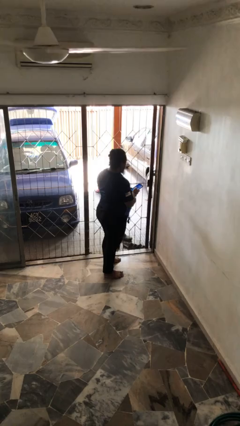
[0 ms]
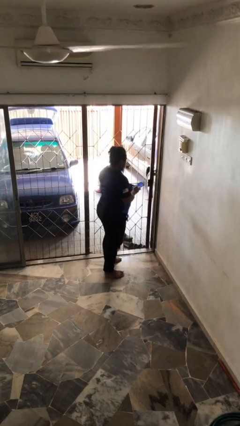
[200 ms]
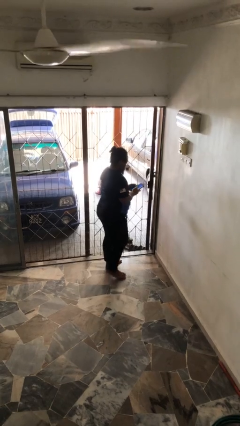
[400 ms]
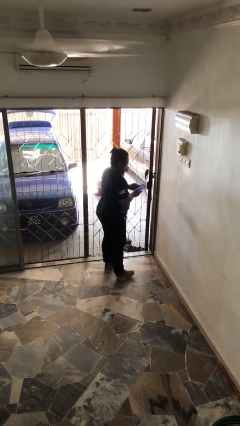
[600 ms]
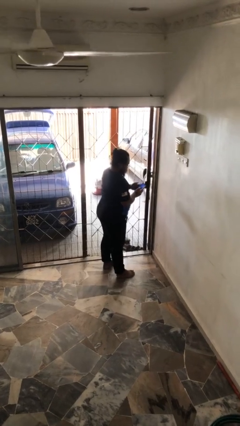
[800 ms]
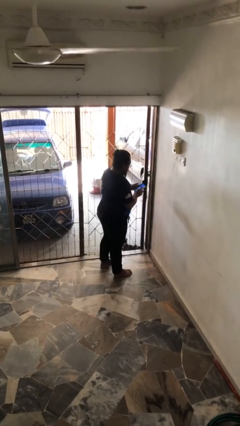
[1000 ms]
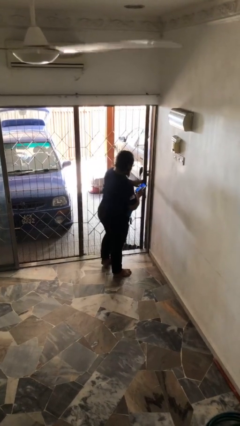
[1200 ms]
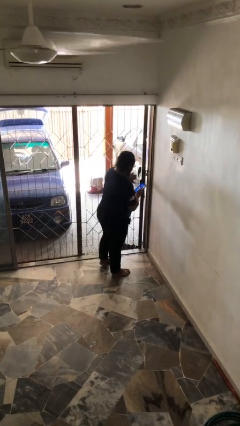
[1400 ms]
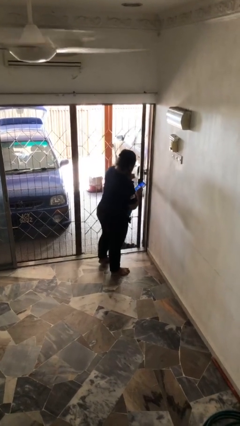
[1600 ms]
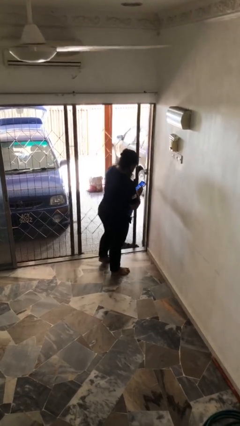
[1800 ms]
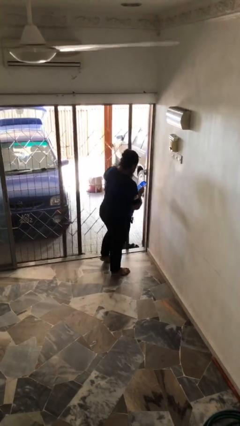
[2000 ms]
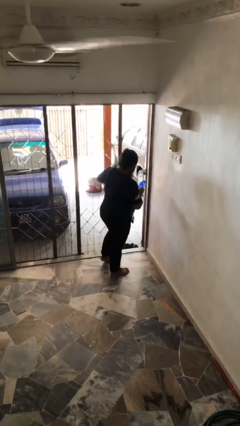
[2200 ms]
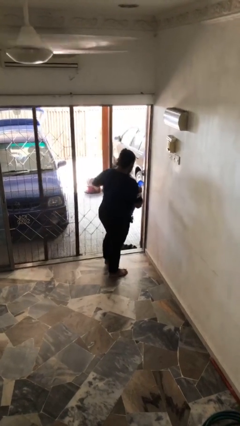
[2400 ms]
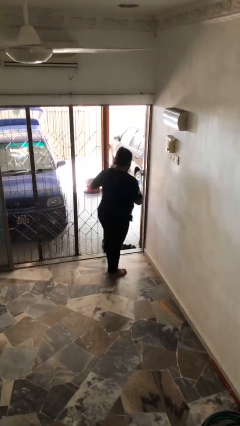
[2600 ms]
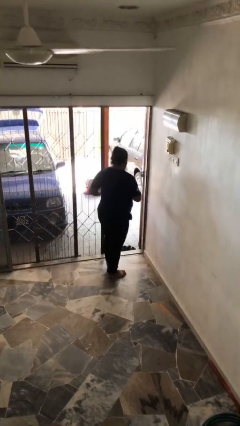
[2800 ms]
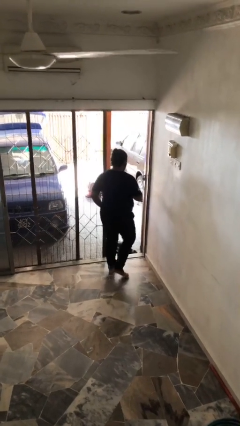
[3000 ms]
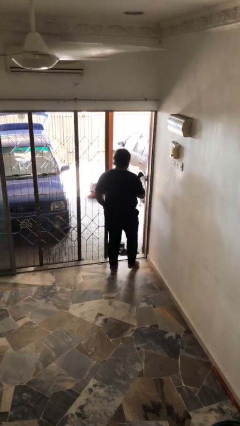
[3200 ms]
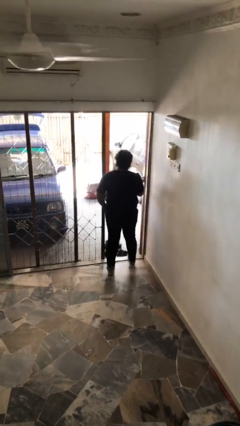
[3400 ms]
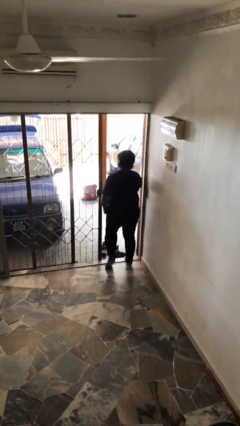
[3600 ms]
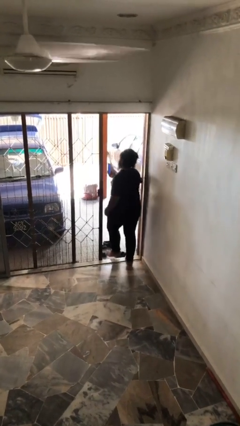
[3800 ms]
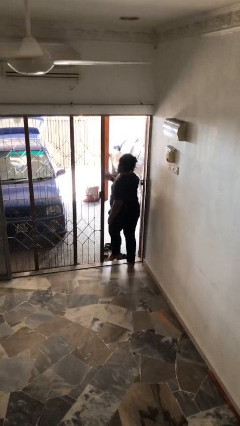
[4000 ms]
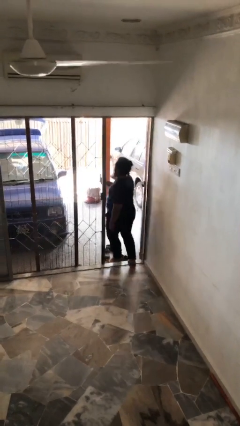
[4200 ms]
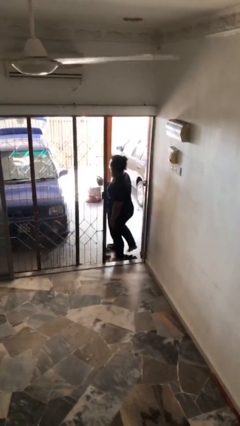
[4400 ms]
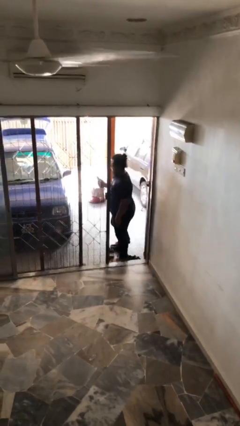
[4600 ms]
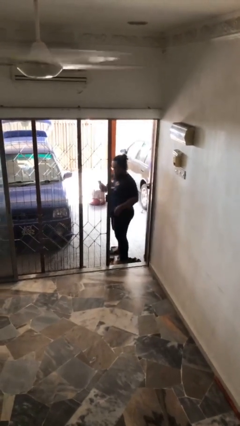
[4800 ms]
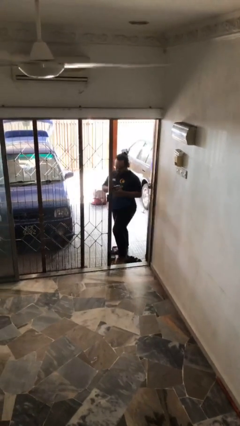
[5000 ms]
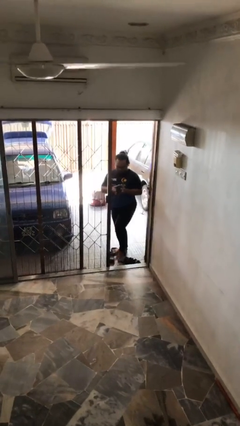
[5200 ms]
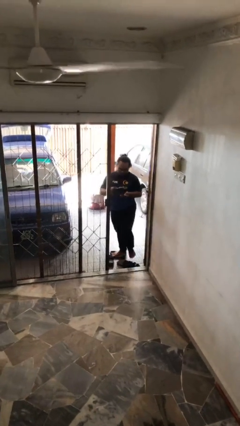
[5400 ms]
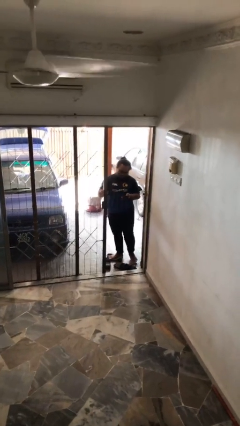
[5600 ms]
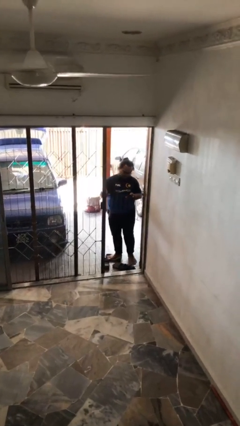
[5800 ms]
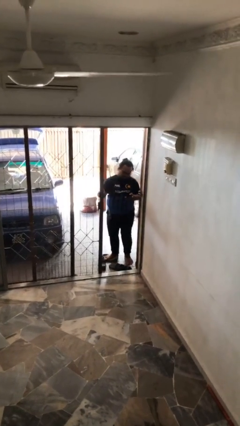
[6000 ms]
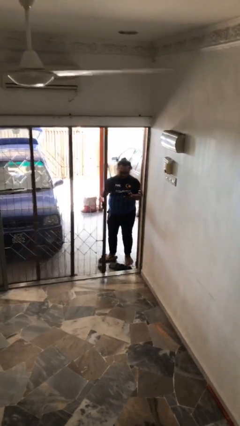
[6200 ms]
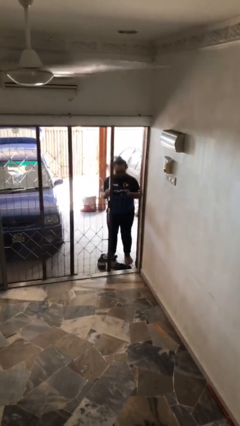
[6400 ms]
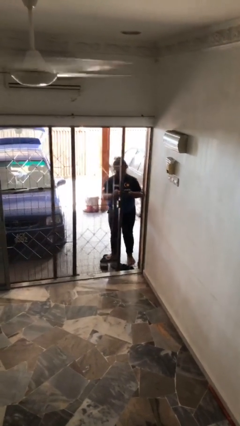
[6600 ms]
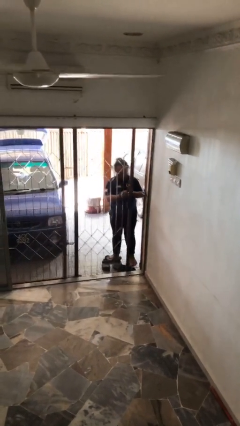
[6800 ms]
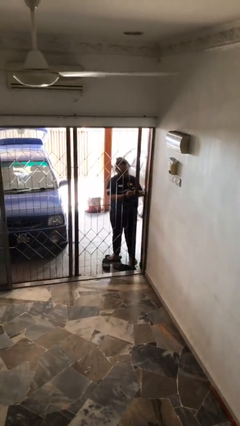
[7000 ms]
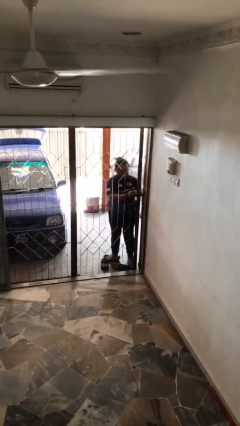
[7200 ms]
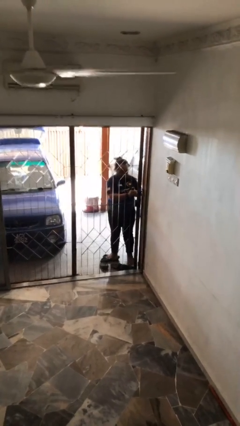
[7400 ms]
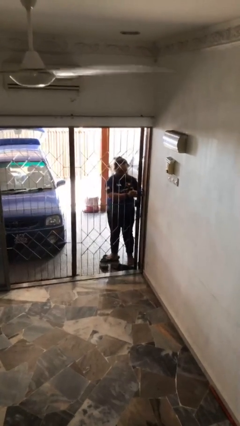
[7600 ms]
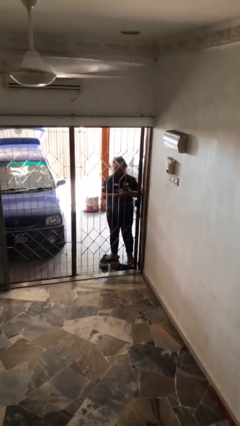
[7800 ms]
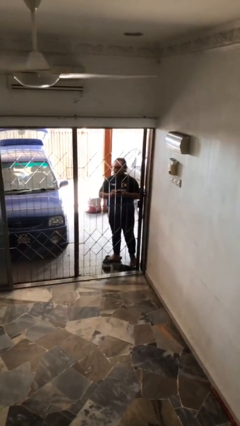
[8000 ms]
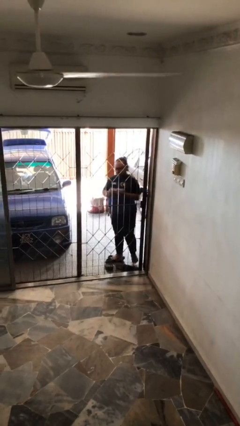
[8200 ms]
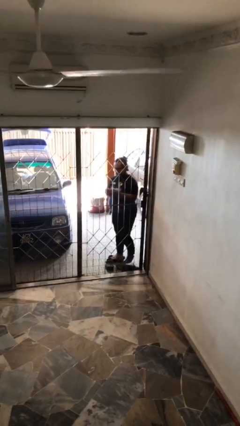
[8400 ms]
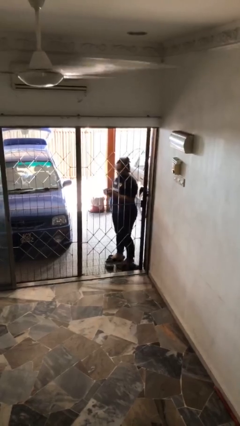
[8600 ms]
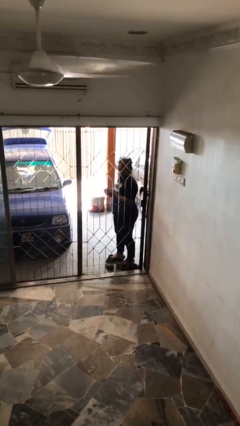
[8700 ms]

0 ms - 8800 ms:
person texts on phone

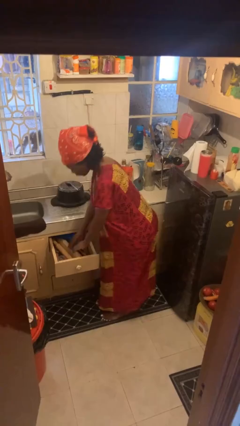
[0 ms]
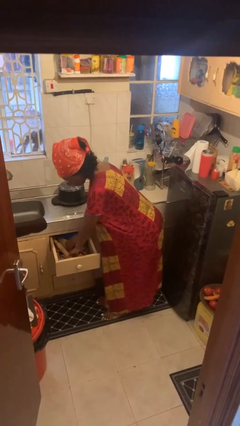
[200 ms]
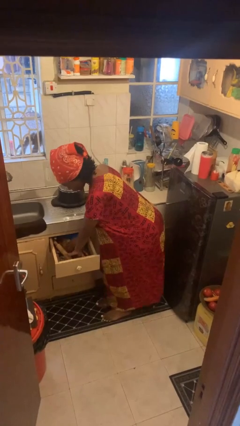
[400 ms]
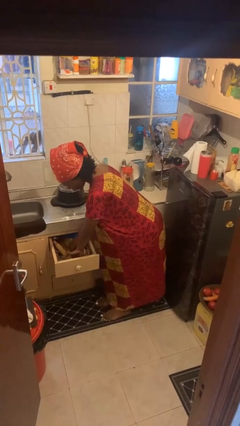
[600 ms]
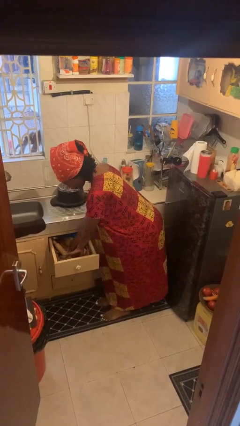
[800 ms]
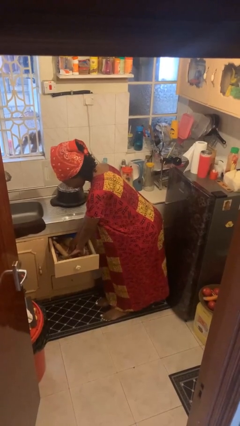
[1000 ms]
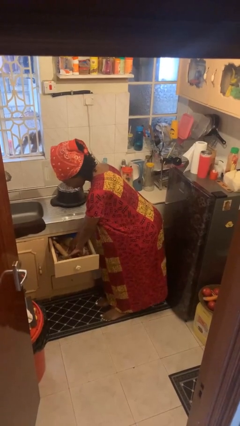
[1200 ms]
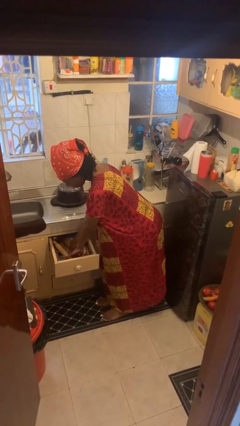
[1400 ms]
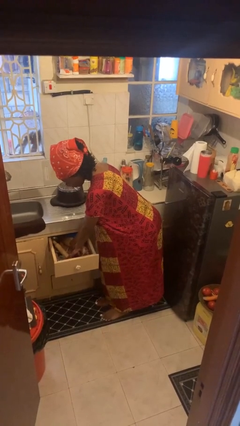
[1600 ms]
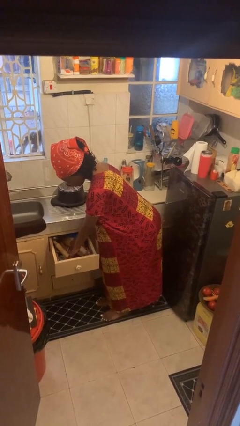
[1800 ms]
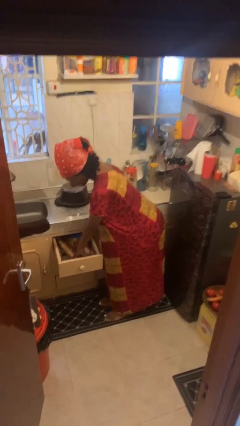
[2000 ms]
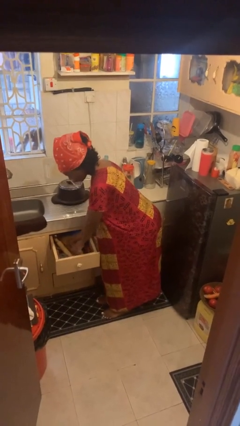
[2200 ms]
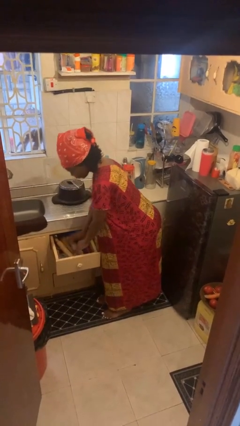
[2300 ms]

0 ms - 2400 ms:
person searches in kitchen drawer

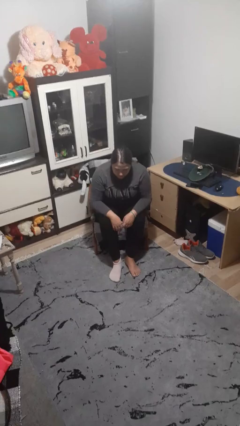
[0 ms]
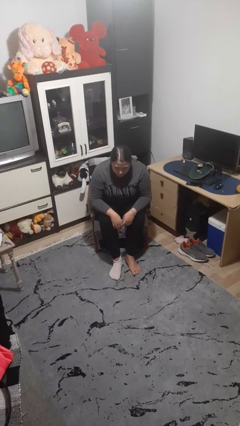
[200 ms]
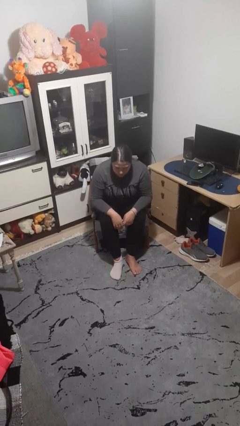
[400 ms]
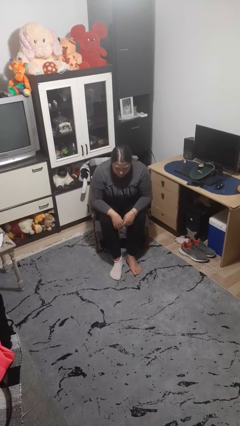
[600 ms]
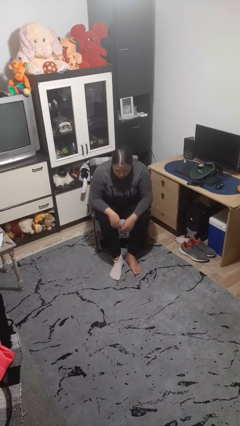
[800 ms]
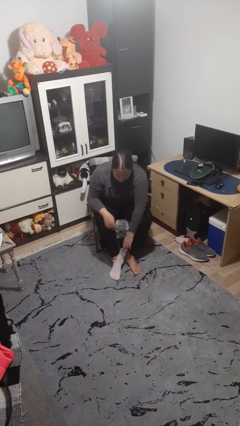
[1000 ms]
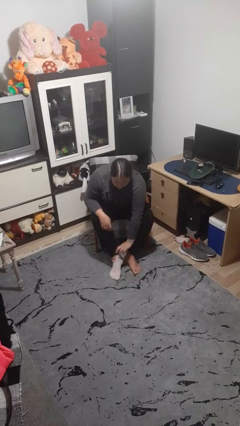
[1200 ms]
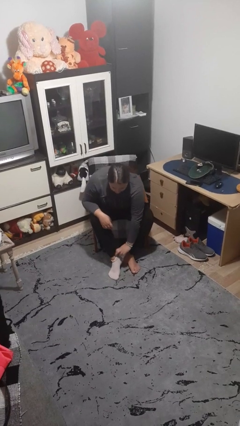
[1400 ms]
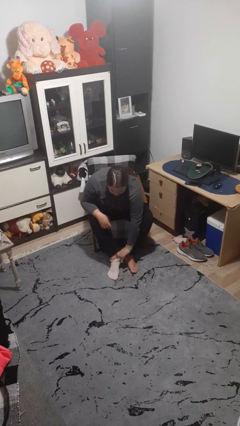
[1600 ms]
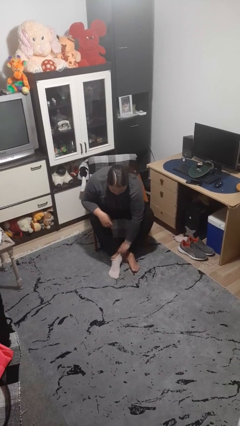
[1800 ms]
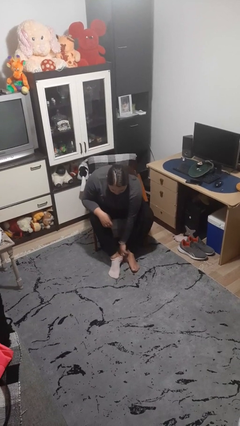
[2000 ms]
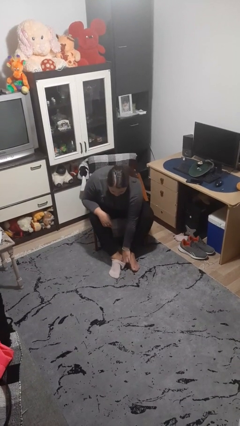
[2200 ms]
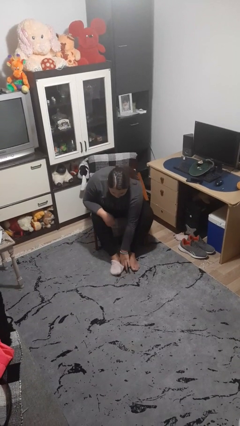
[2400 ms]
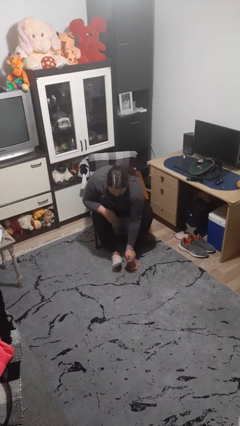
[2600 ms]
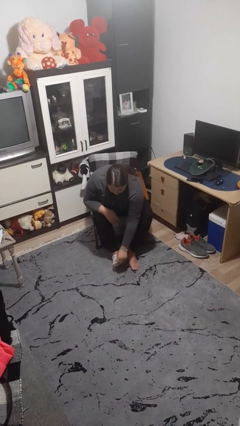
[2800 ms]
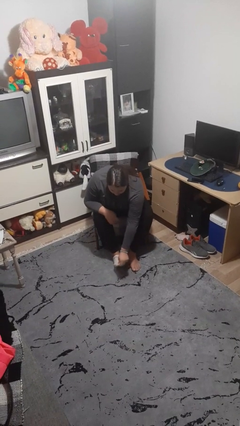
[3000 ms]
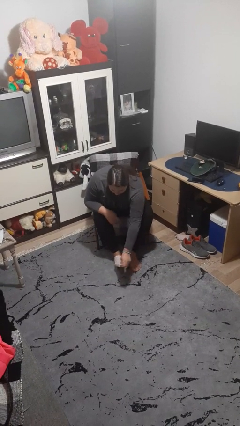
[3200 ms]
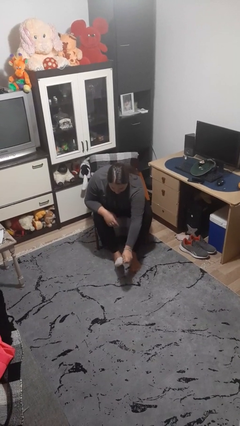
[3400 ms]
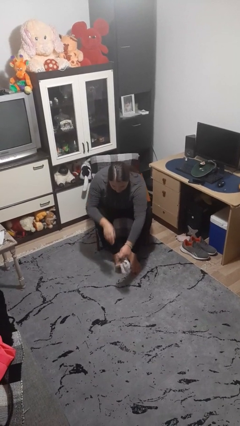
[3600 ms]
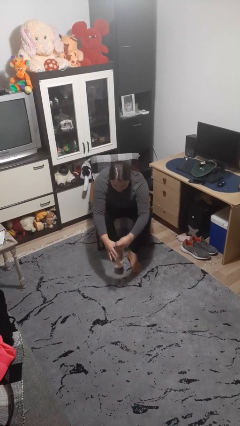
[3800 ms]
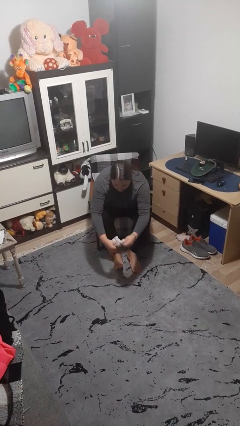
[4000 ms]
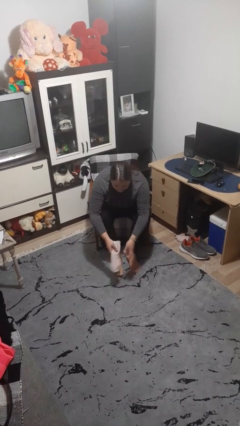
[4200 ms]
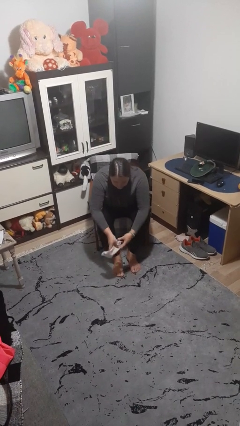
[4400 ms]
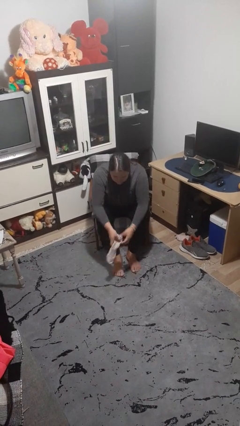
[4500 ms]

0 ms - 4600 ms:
person takes off socks

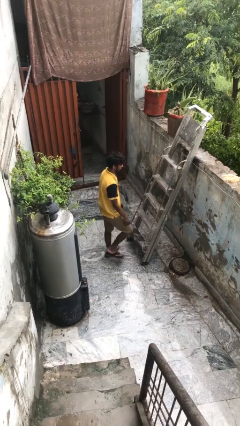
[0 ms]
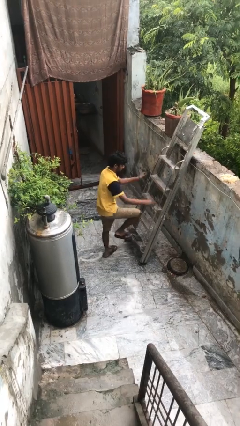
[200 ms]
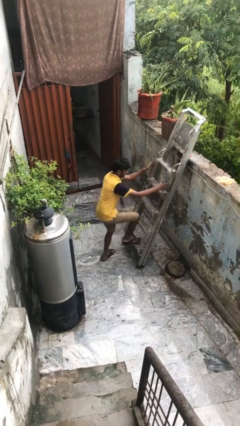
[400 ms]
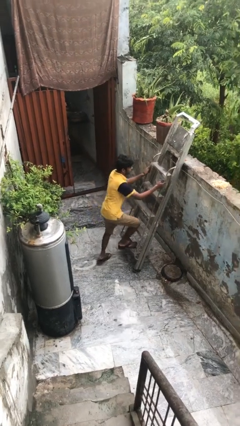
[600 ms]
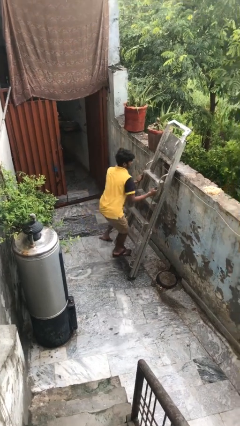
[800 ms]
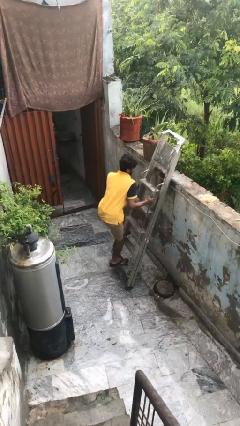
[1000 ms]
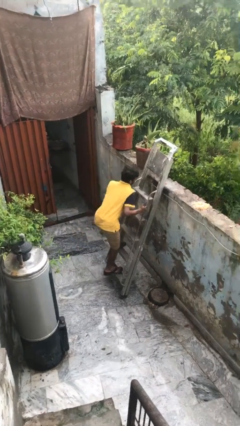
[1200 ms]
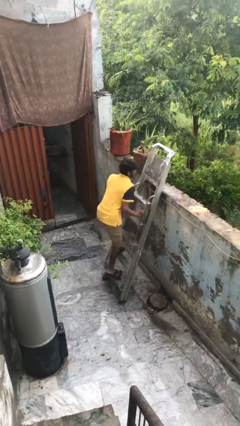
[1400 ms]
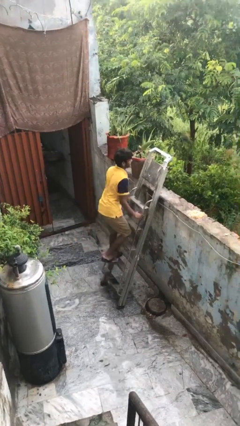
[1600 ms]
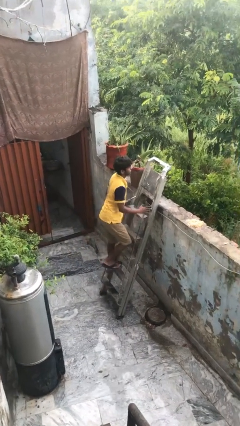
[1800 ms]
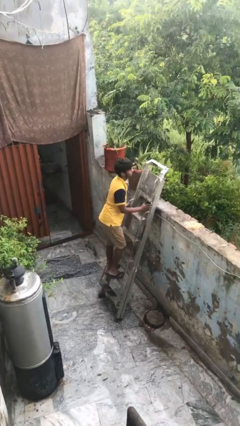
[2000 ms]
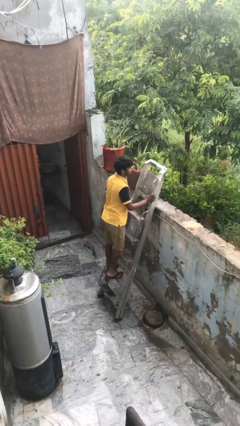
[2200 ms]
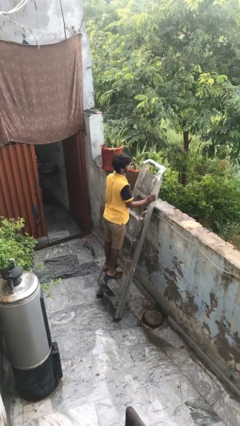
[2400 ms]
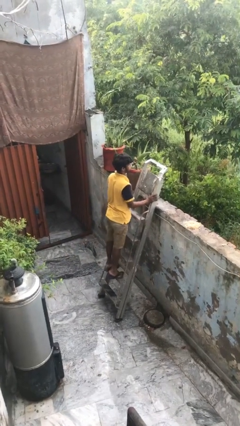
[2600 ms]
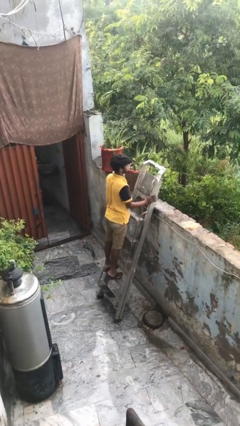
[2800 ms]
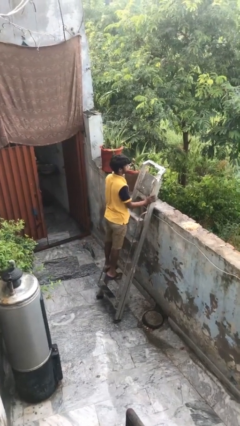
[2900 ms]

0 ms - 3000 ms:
person climbs up ladder
